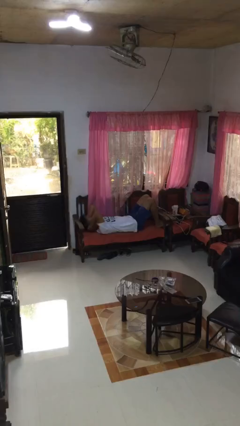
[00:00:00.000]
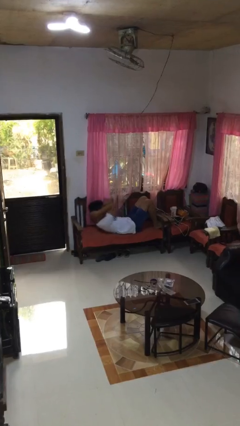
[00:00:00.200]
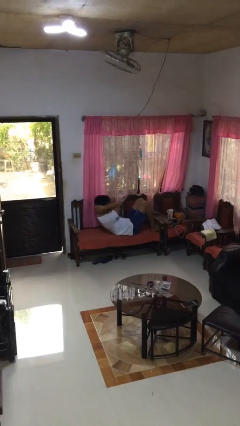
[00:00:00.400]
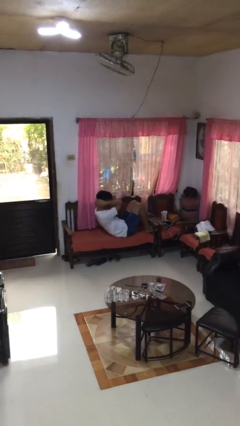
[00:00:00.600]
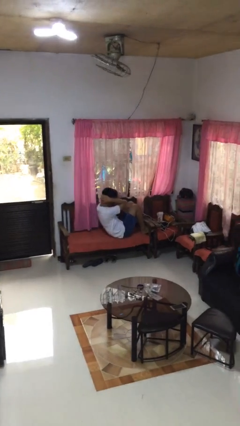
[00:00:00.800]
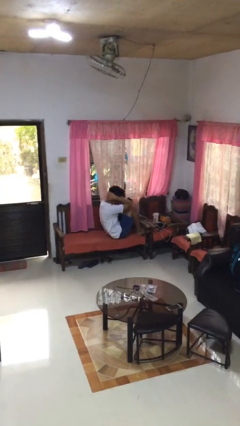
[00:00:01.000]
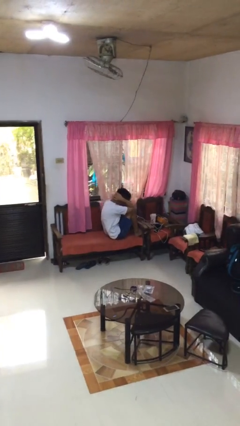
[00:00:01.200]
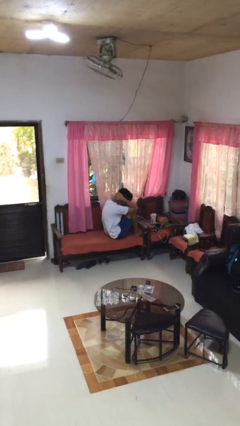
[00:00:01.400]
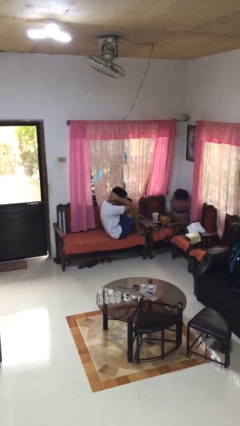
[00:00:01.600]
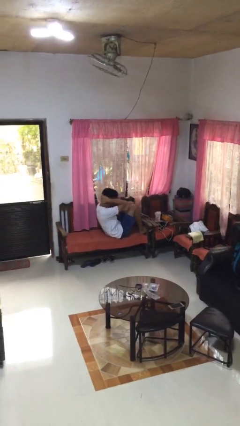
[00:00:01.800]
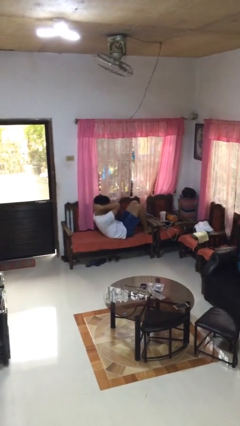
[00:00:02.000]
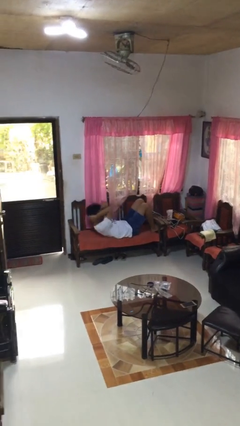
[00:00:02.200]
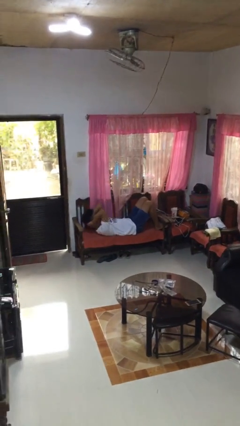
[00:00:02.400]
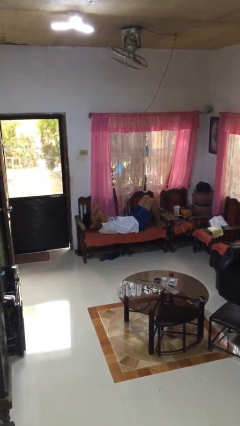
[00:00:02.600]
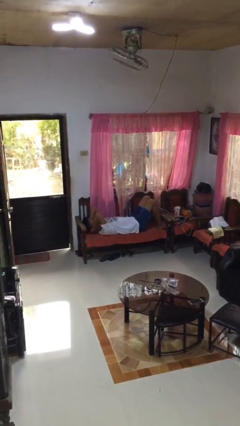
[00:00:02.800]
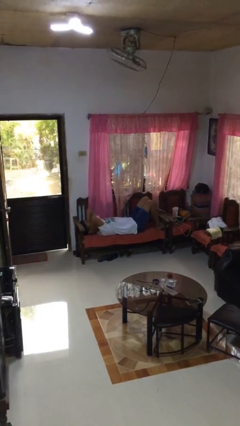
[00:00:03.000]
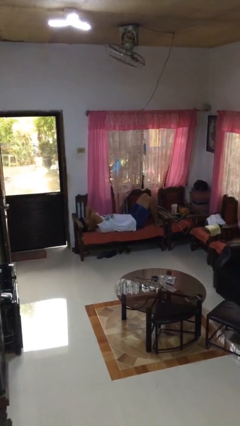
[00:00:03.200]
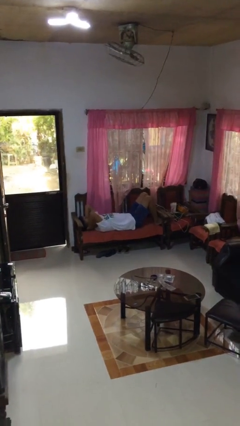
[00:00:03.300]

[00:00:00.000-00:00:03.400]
person exercises with situp

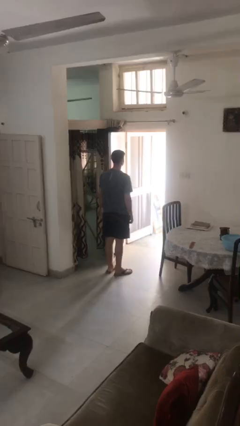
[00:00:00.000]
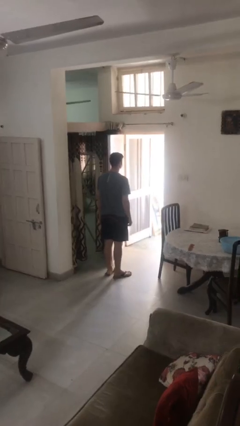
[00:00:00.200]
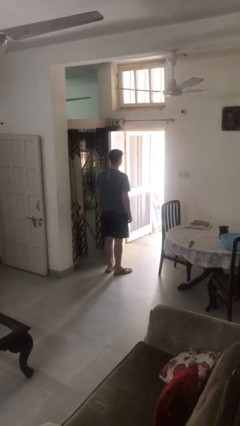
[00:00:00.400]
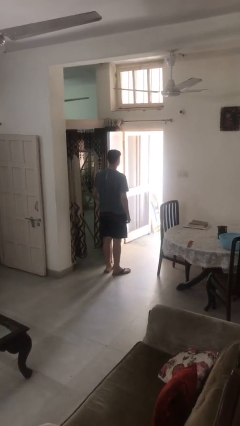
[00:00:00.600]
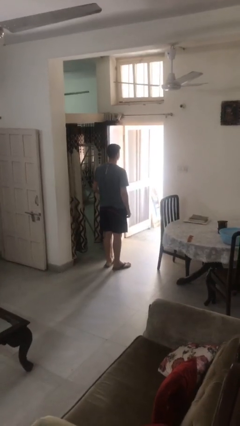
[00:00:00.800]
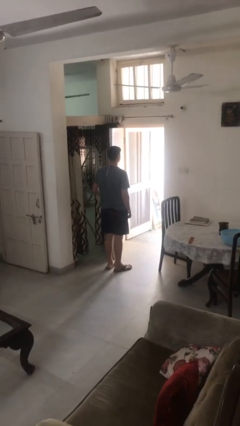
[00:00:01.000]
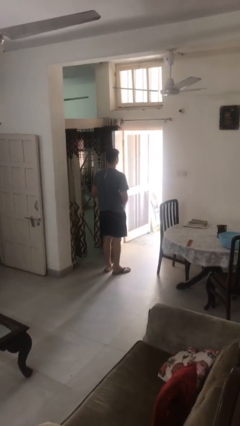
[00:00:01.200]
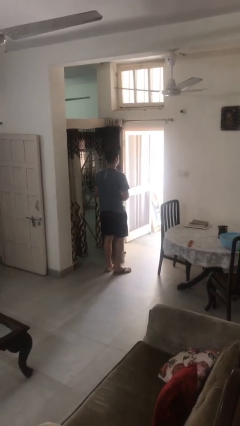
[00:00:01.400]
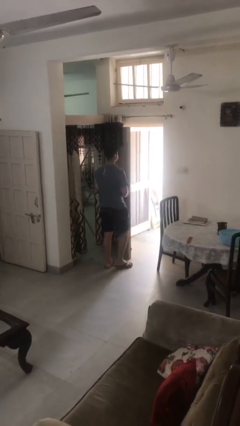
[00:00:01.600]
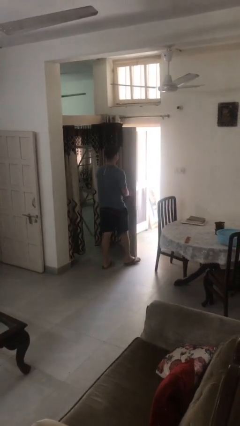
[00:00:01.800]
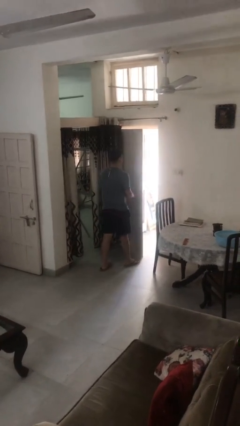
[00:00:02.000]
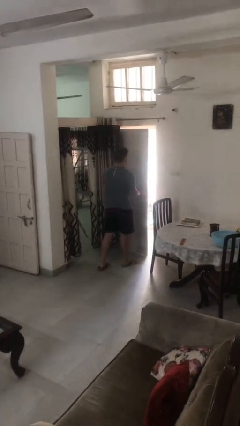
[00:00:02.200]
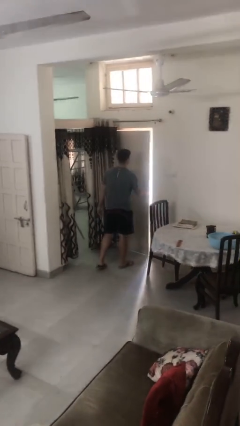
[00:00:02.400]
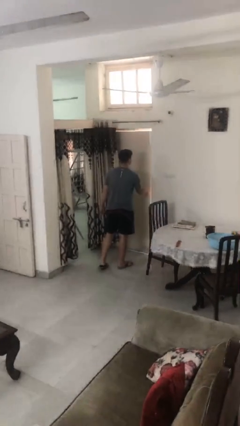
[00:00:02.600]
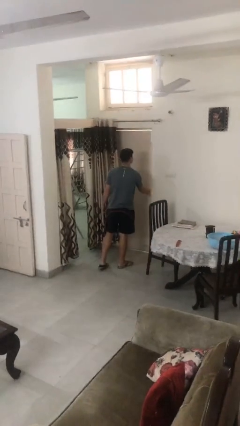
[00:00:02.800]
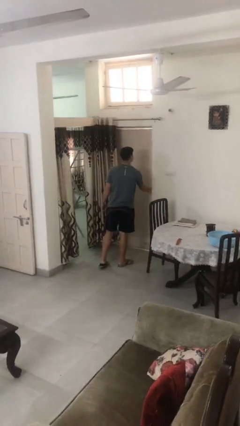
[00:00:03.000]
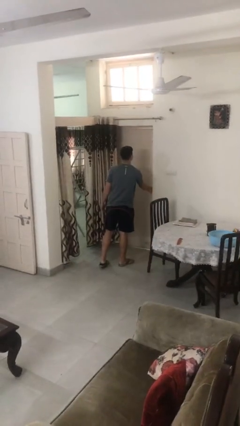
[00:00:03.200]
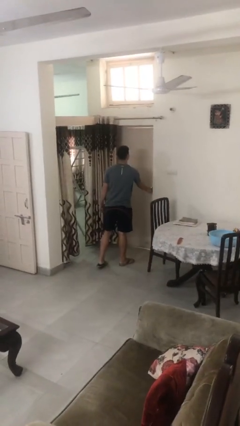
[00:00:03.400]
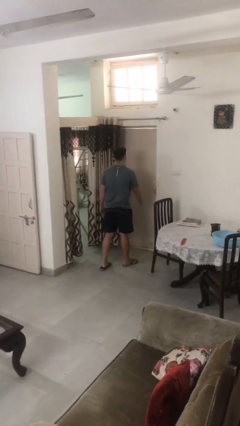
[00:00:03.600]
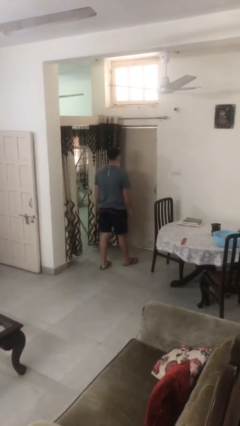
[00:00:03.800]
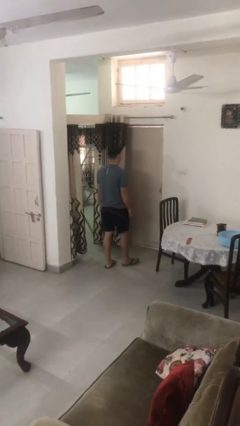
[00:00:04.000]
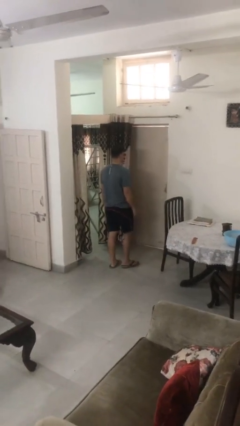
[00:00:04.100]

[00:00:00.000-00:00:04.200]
person closes facility door

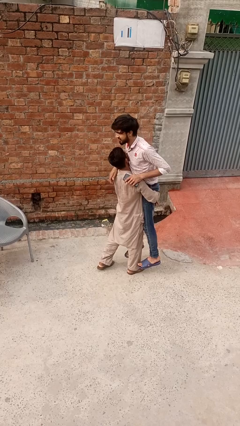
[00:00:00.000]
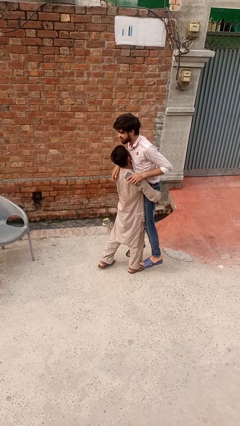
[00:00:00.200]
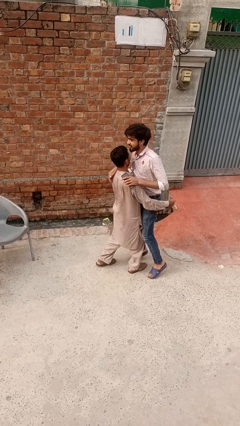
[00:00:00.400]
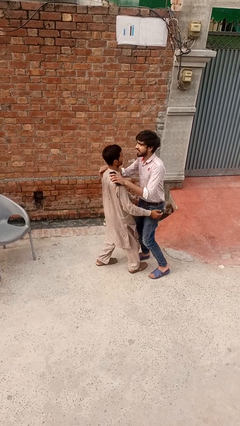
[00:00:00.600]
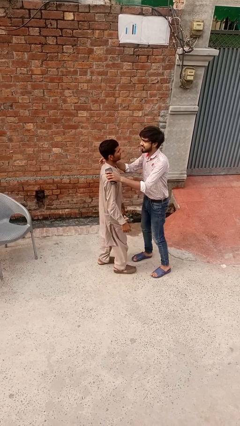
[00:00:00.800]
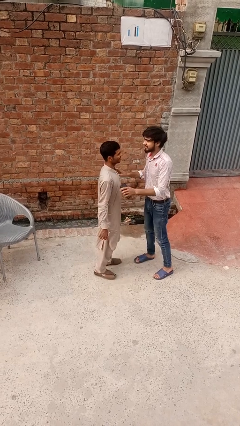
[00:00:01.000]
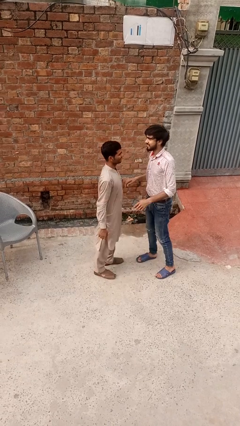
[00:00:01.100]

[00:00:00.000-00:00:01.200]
person puts down person

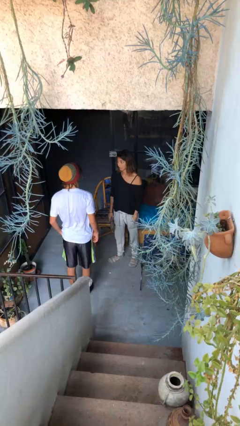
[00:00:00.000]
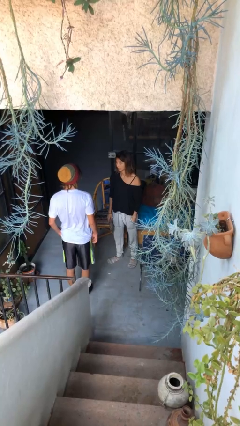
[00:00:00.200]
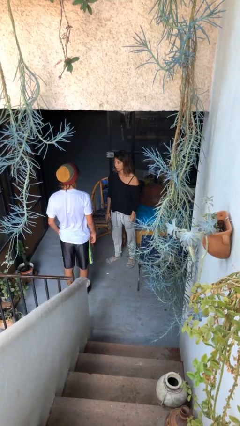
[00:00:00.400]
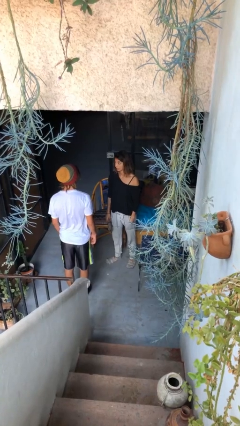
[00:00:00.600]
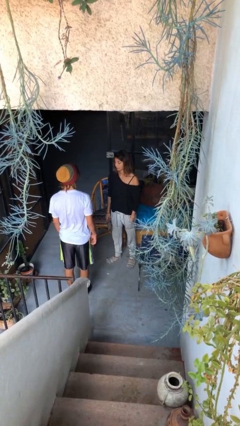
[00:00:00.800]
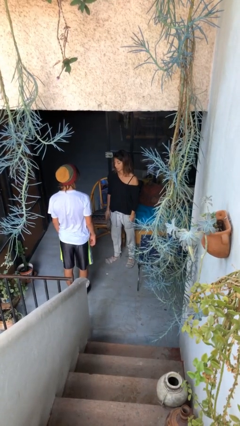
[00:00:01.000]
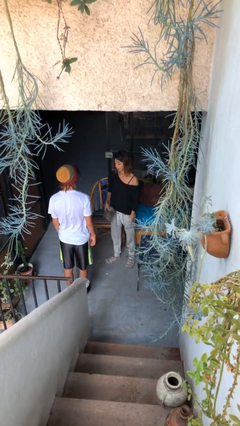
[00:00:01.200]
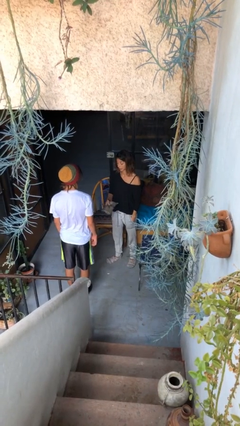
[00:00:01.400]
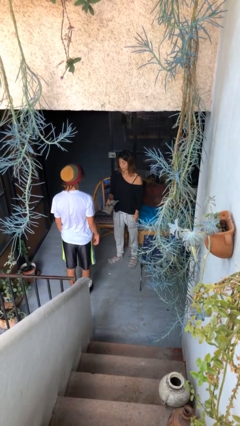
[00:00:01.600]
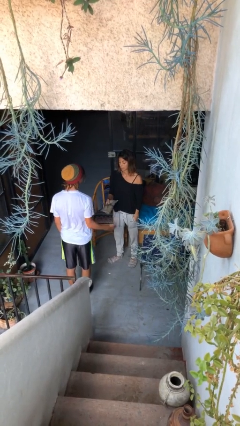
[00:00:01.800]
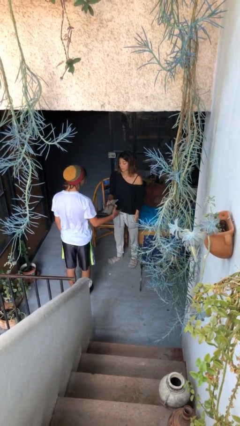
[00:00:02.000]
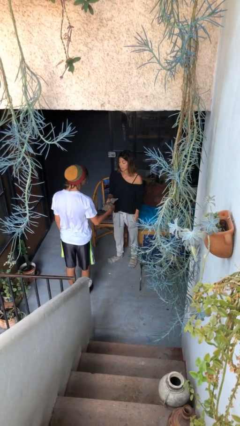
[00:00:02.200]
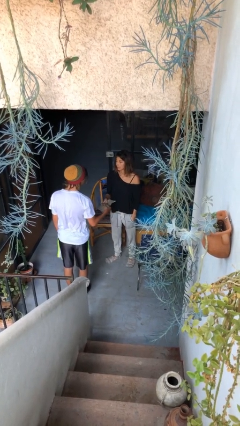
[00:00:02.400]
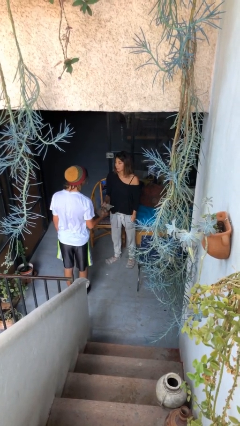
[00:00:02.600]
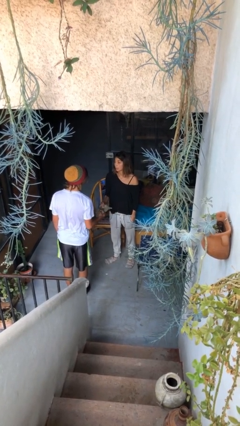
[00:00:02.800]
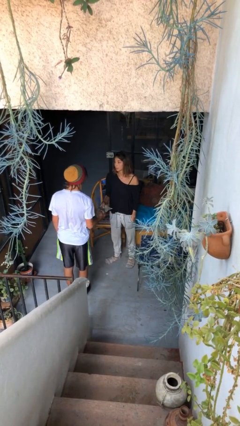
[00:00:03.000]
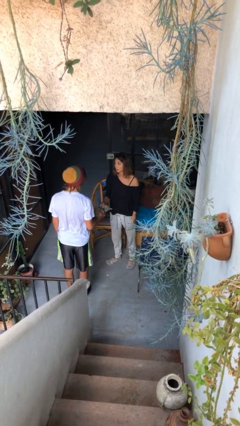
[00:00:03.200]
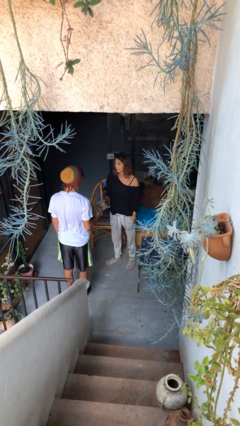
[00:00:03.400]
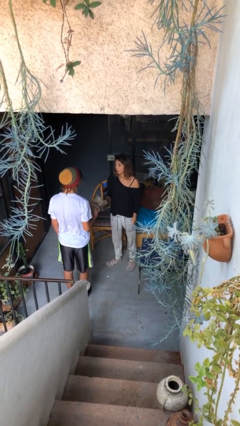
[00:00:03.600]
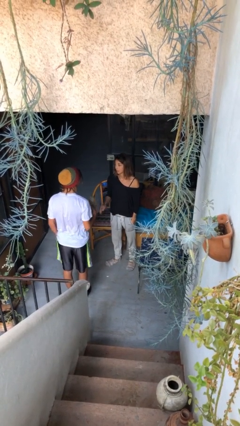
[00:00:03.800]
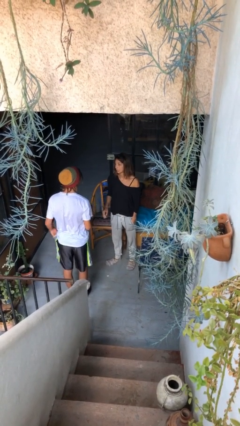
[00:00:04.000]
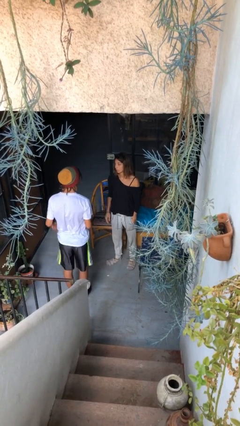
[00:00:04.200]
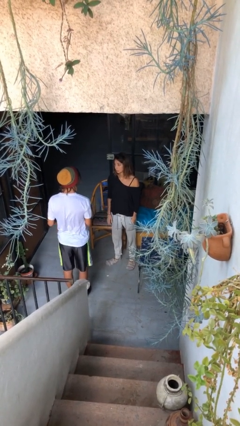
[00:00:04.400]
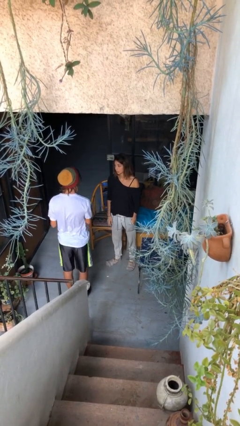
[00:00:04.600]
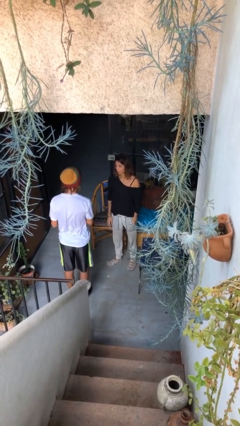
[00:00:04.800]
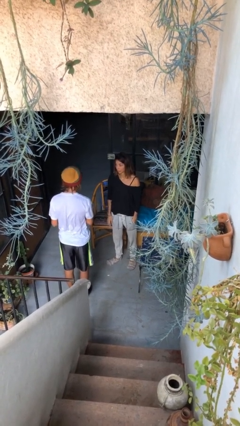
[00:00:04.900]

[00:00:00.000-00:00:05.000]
person transfers object to person

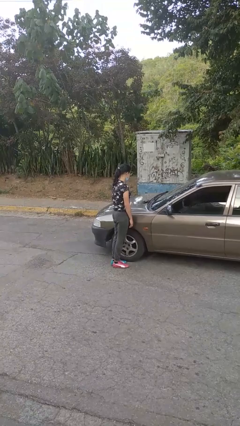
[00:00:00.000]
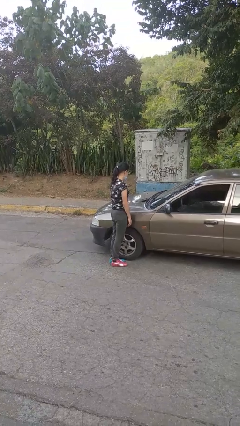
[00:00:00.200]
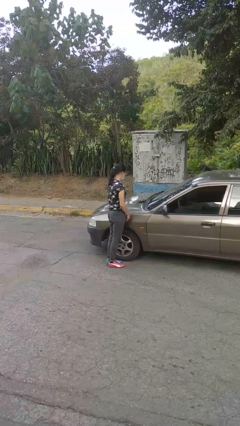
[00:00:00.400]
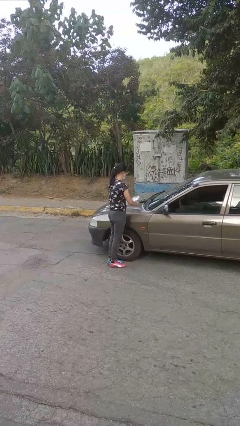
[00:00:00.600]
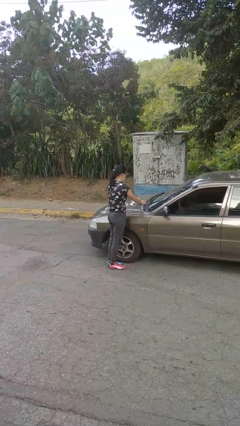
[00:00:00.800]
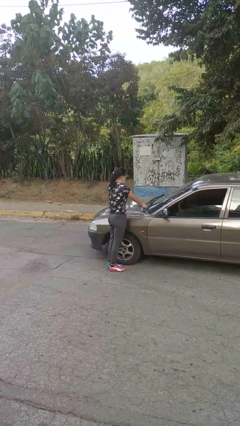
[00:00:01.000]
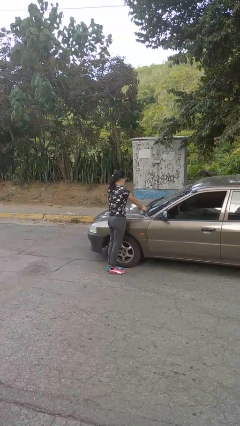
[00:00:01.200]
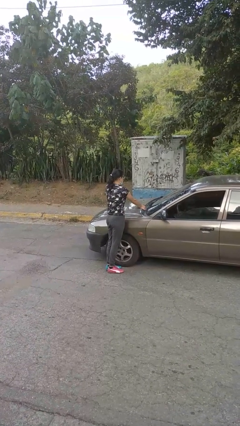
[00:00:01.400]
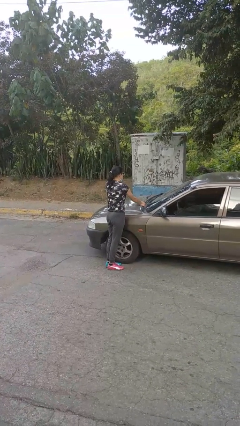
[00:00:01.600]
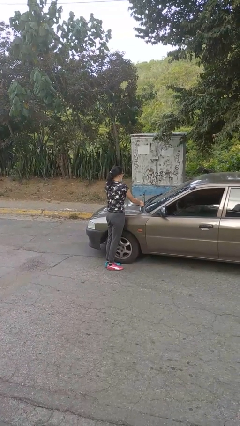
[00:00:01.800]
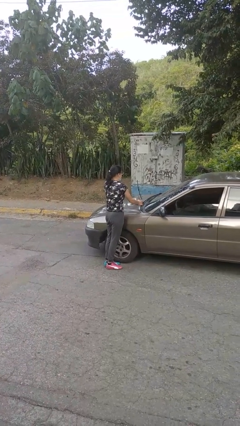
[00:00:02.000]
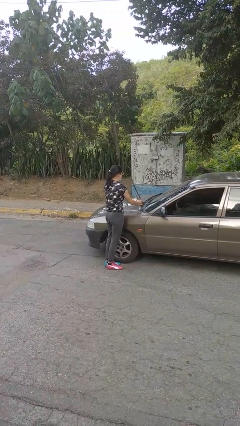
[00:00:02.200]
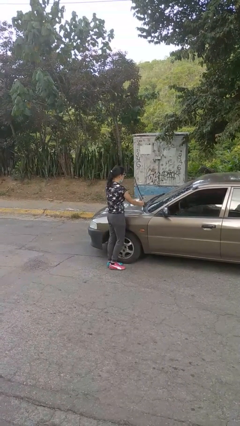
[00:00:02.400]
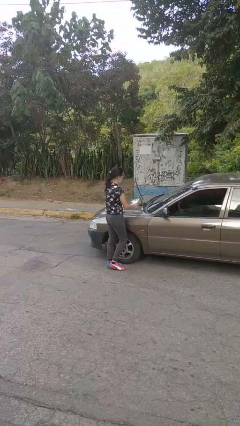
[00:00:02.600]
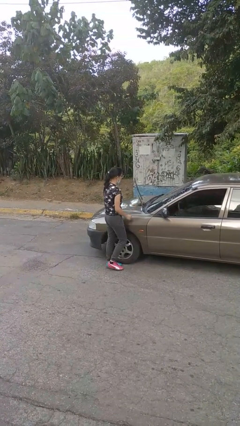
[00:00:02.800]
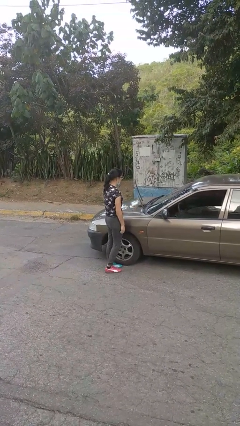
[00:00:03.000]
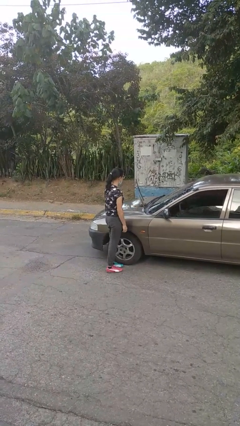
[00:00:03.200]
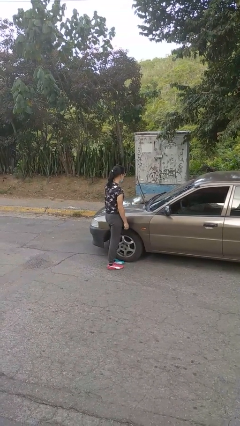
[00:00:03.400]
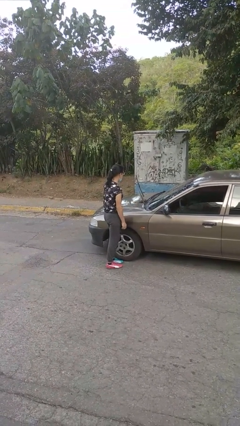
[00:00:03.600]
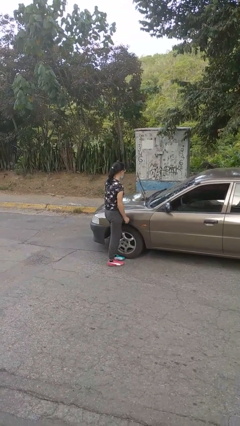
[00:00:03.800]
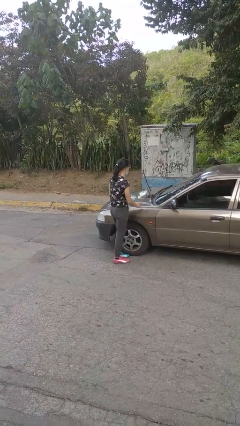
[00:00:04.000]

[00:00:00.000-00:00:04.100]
person flips up car wipers
